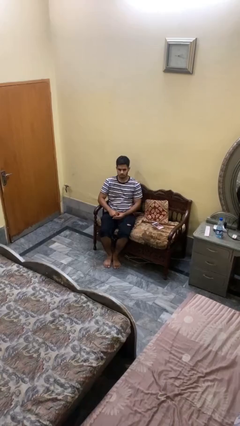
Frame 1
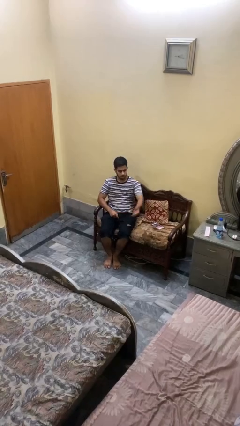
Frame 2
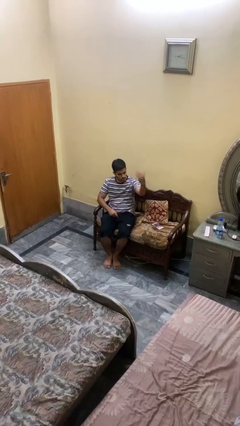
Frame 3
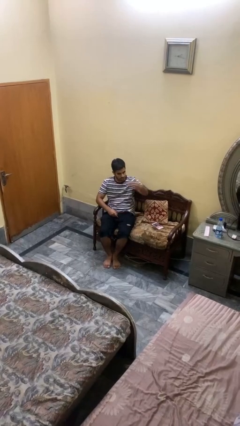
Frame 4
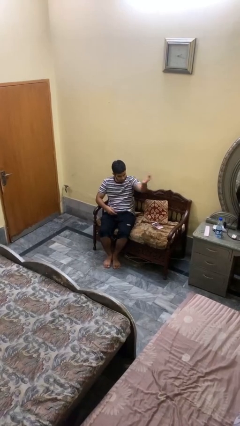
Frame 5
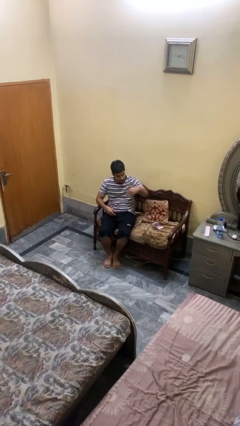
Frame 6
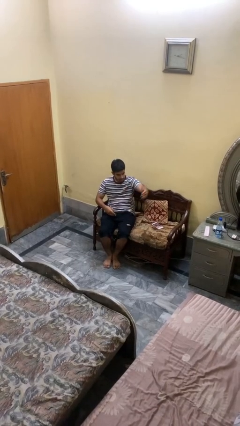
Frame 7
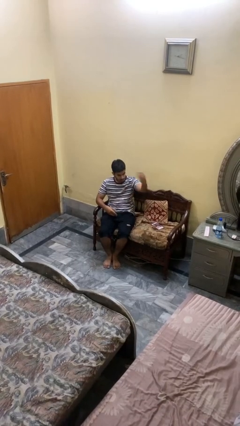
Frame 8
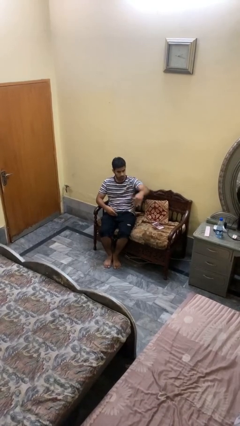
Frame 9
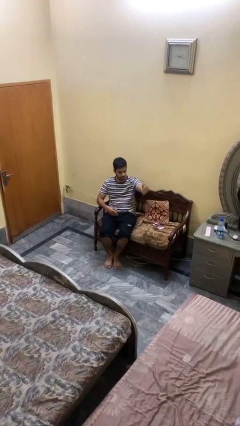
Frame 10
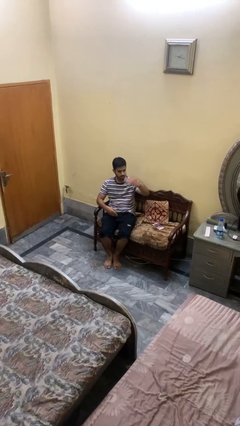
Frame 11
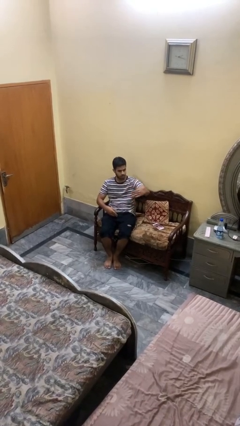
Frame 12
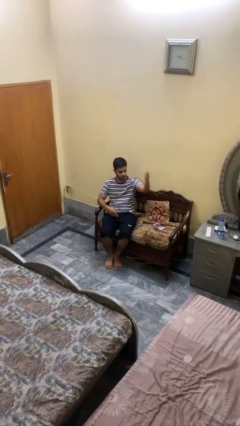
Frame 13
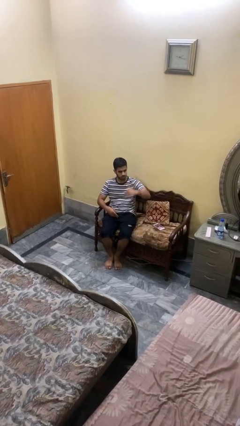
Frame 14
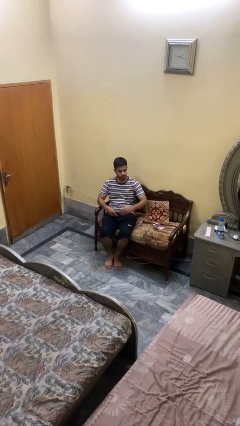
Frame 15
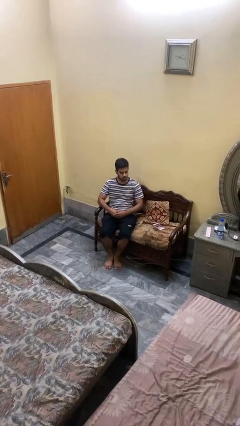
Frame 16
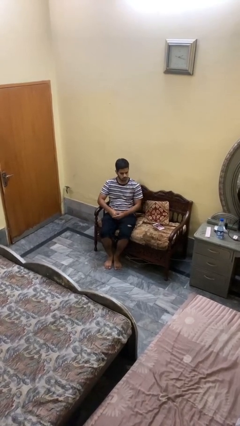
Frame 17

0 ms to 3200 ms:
person gestures come here
